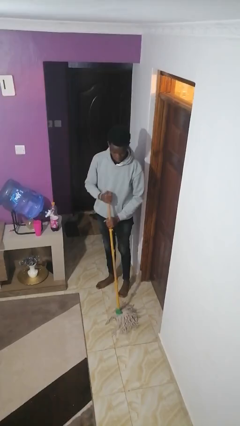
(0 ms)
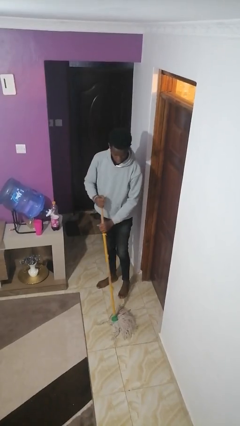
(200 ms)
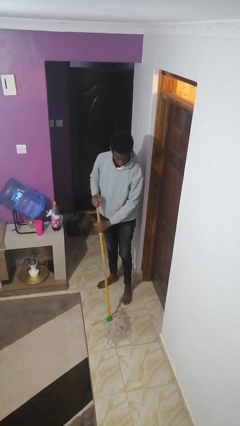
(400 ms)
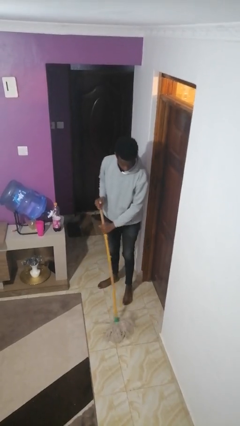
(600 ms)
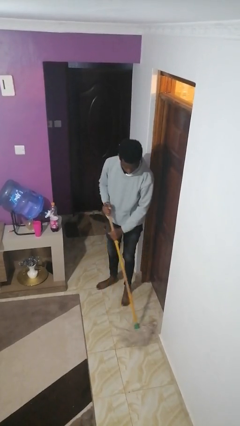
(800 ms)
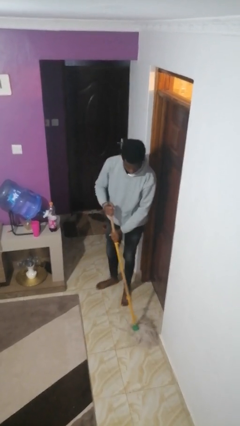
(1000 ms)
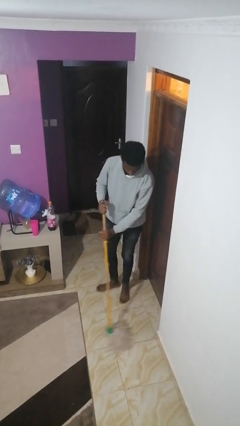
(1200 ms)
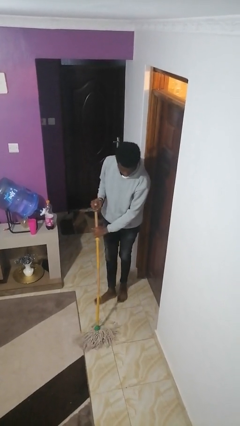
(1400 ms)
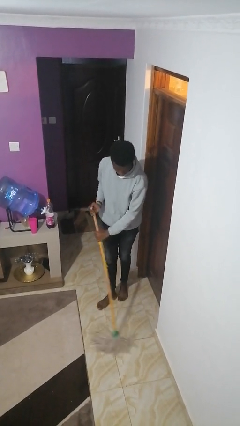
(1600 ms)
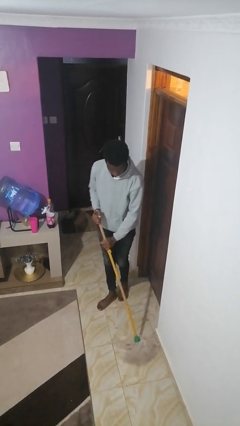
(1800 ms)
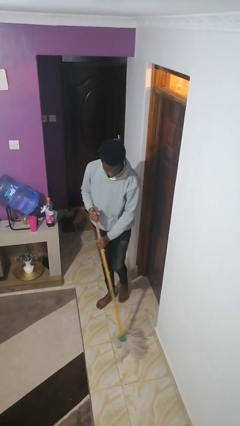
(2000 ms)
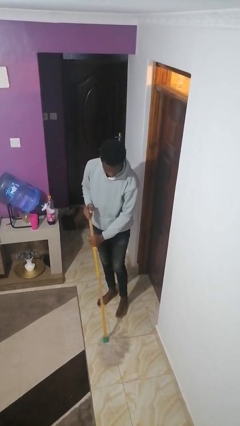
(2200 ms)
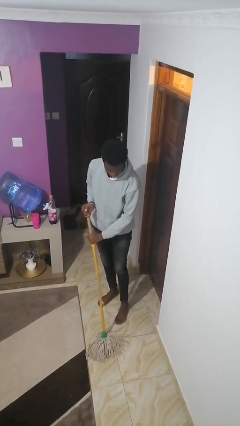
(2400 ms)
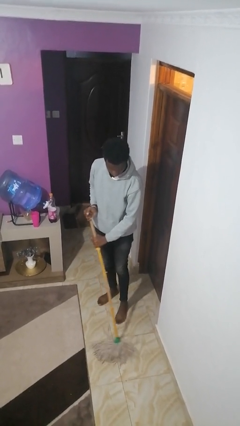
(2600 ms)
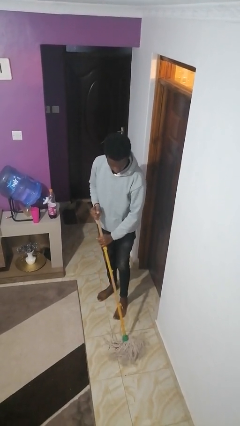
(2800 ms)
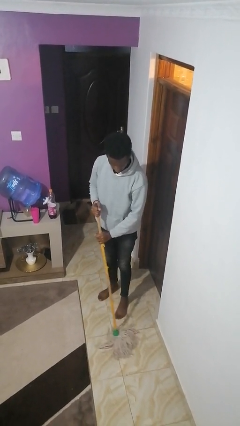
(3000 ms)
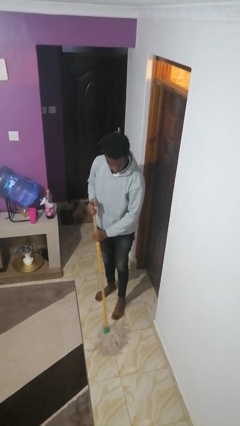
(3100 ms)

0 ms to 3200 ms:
person mops

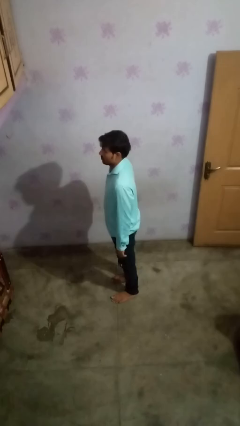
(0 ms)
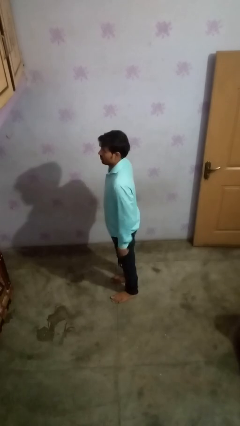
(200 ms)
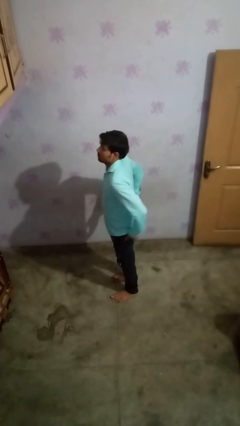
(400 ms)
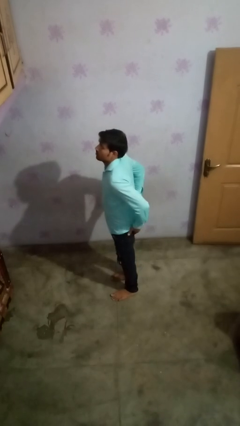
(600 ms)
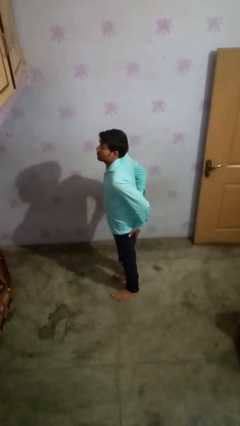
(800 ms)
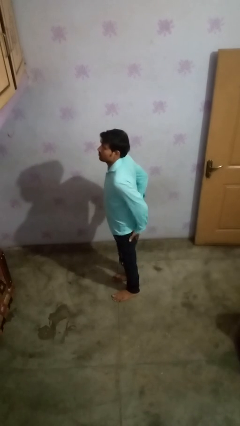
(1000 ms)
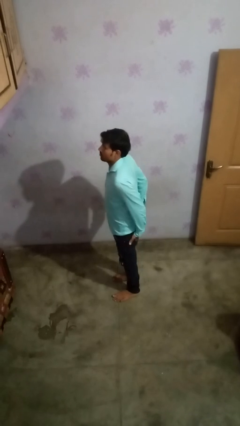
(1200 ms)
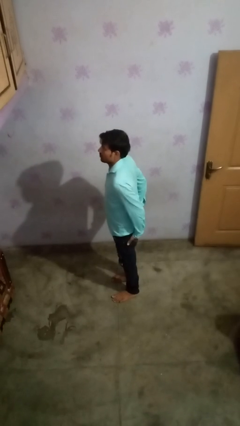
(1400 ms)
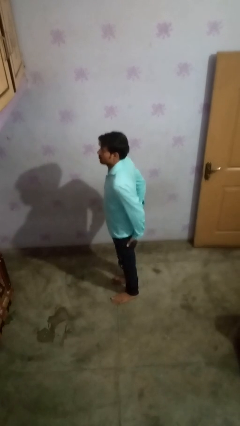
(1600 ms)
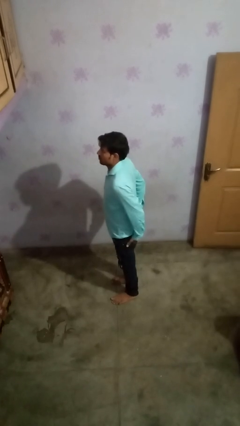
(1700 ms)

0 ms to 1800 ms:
person puts hands in back pockets

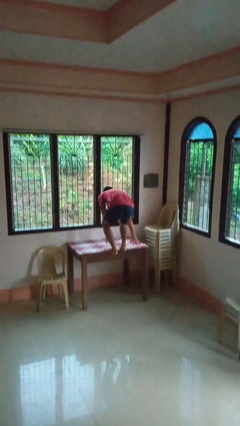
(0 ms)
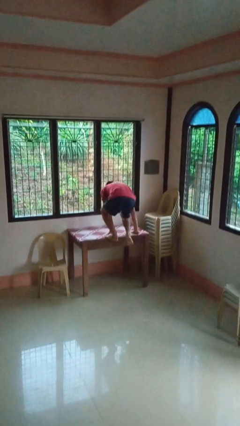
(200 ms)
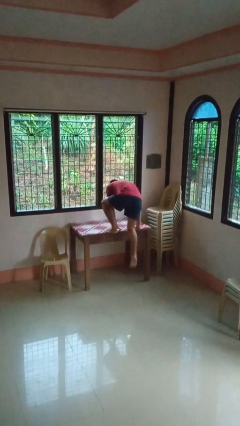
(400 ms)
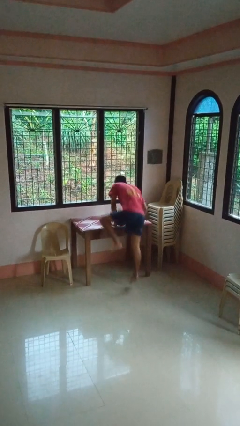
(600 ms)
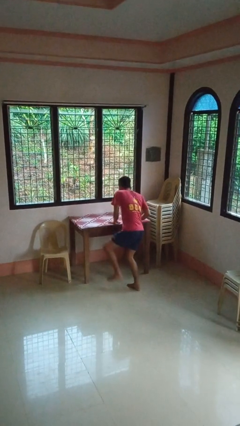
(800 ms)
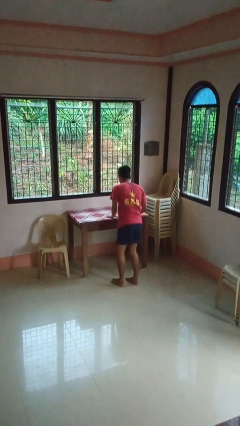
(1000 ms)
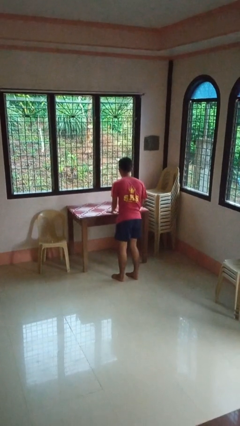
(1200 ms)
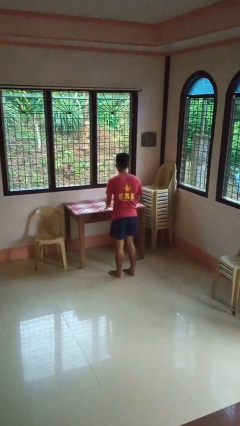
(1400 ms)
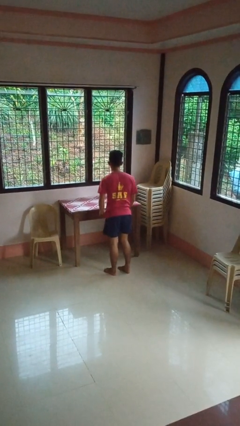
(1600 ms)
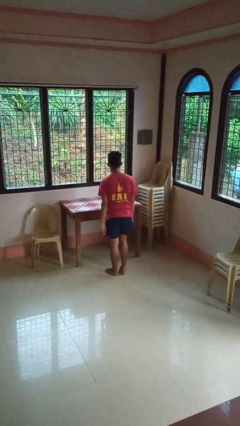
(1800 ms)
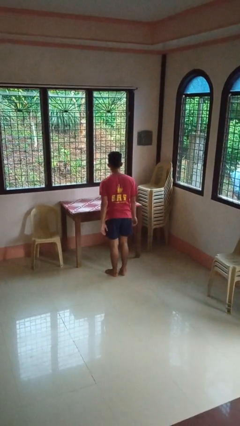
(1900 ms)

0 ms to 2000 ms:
person climbs off table

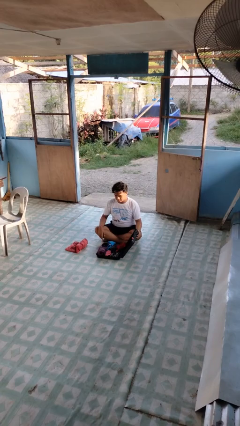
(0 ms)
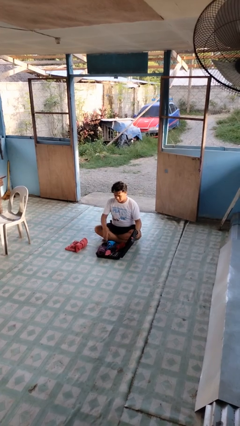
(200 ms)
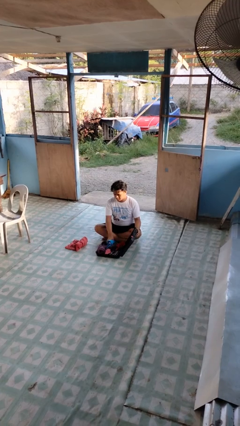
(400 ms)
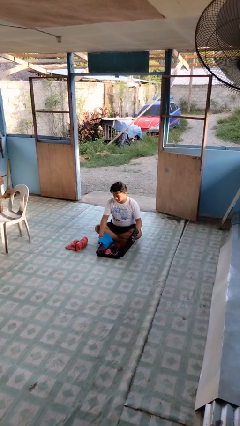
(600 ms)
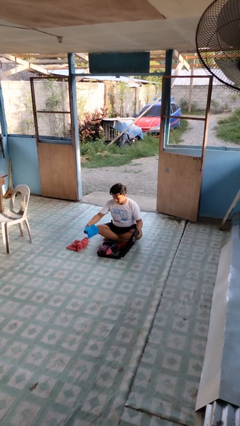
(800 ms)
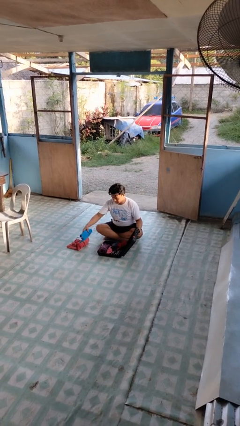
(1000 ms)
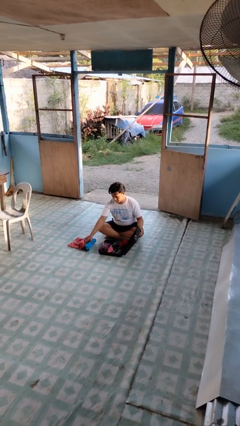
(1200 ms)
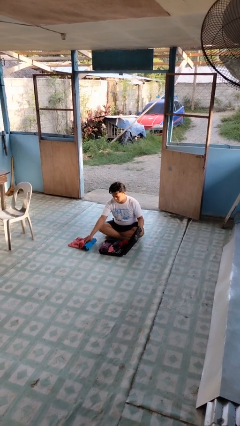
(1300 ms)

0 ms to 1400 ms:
person unloads clothes from suitcase

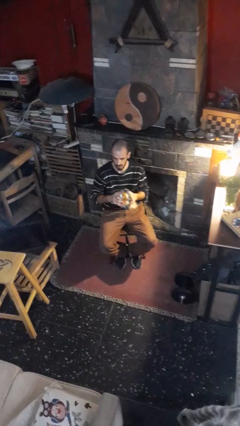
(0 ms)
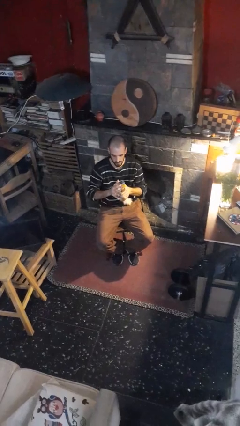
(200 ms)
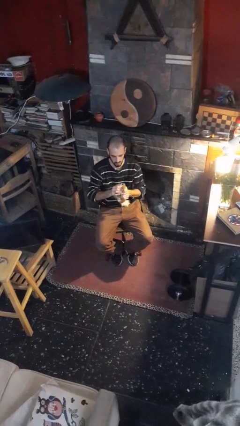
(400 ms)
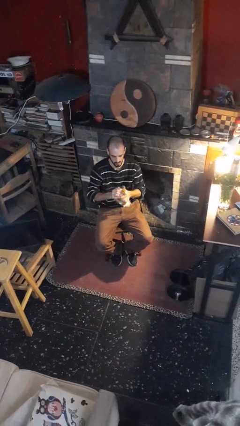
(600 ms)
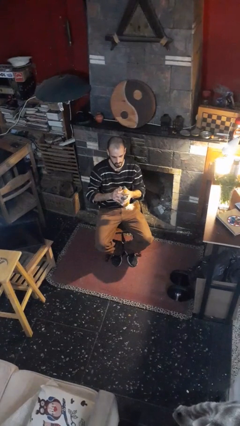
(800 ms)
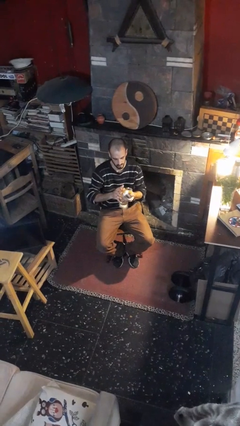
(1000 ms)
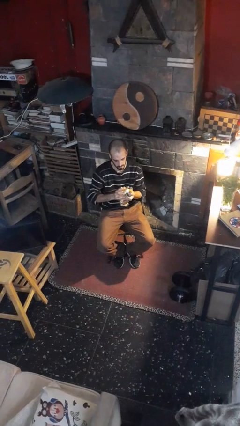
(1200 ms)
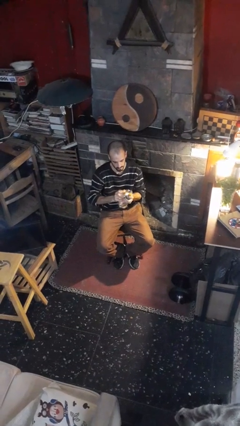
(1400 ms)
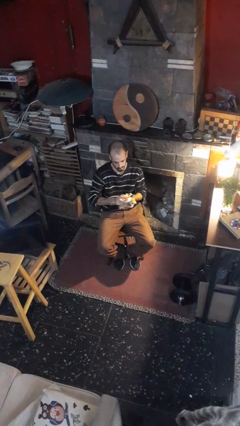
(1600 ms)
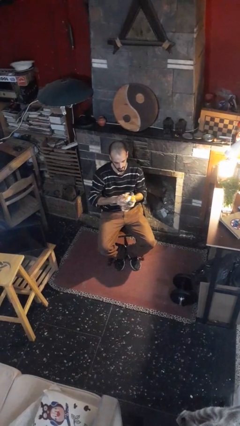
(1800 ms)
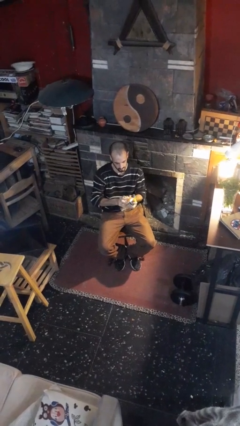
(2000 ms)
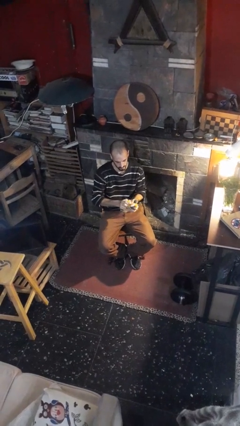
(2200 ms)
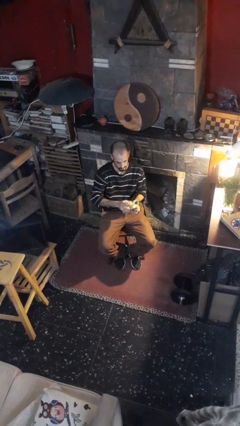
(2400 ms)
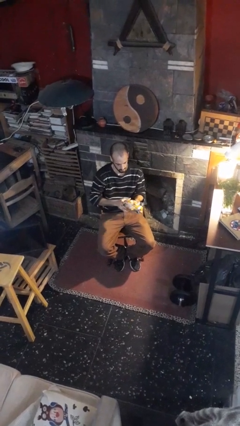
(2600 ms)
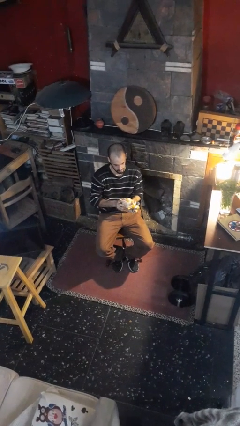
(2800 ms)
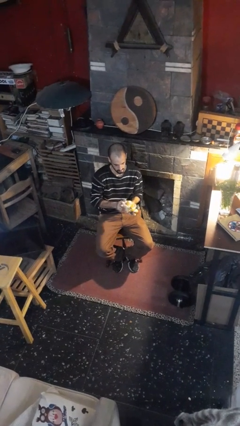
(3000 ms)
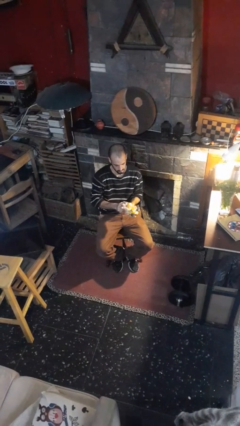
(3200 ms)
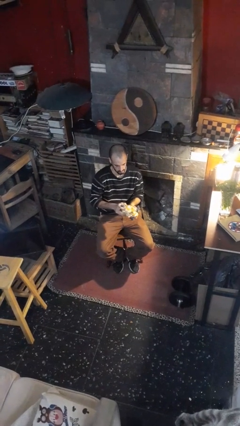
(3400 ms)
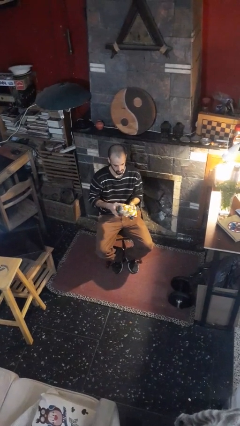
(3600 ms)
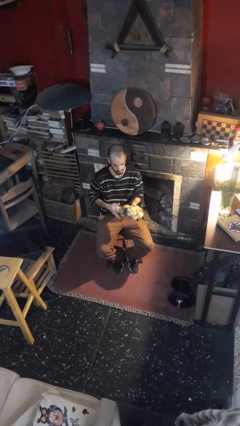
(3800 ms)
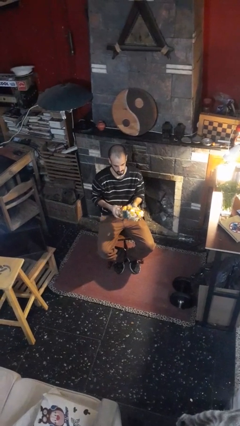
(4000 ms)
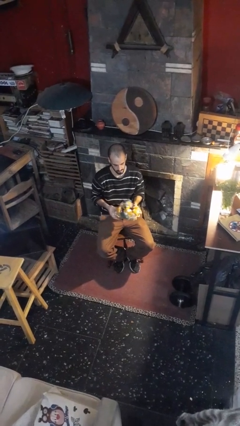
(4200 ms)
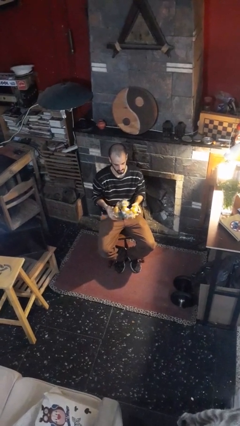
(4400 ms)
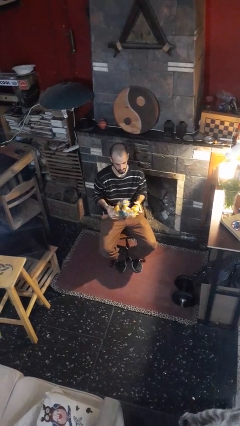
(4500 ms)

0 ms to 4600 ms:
person squeezes object

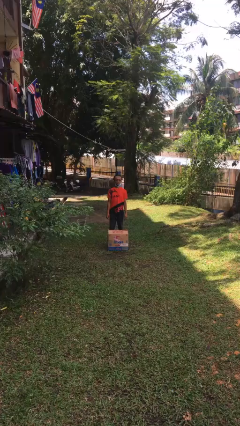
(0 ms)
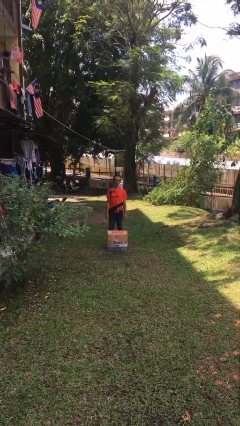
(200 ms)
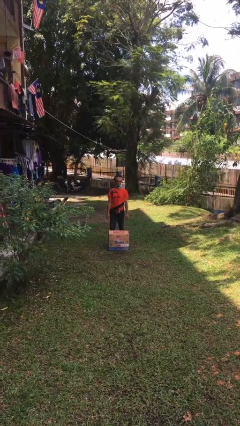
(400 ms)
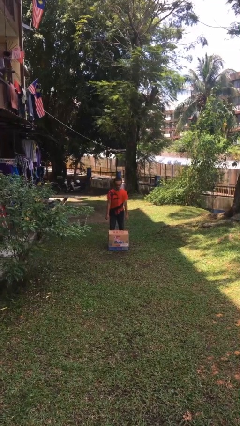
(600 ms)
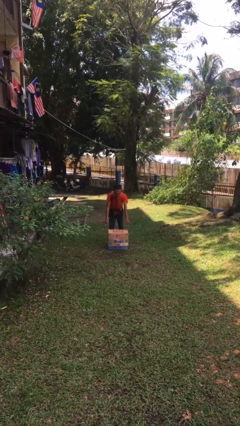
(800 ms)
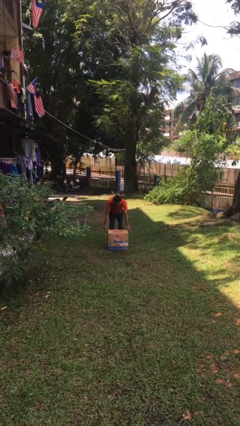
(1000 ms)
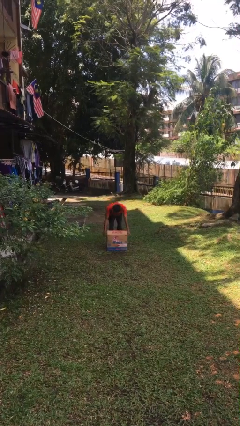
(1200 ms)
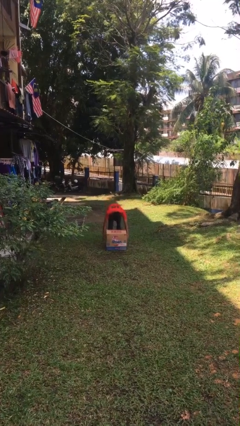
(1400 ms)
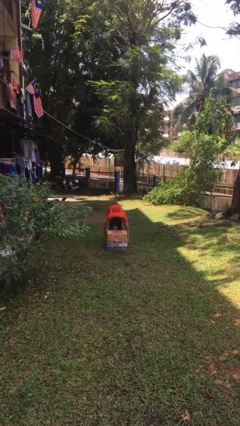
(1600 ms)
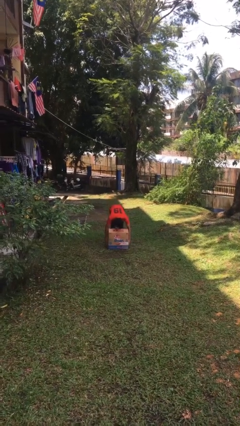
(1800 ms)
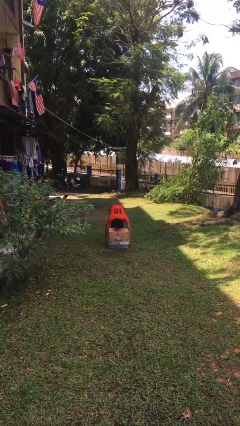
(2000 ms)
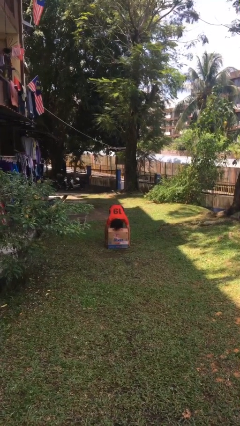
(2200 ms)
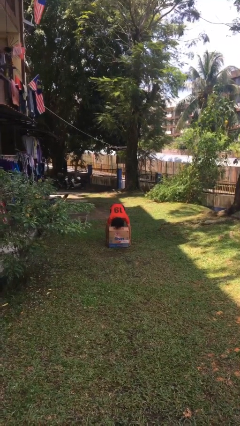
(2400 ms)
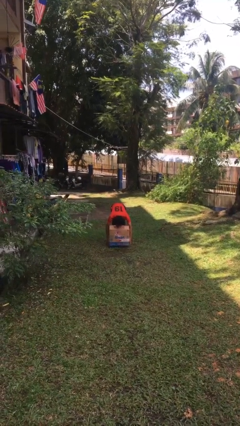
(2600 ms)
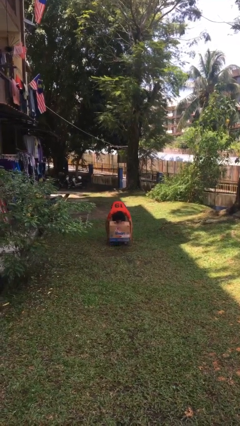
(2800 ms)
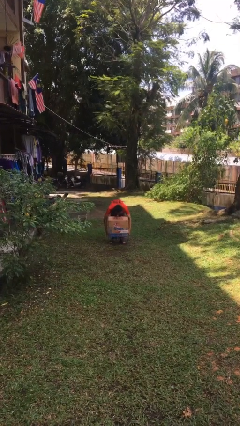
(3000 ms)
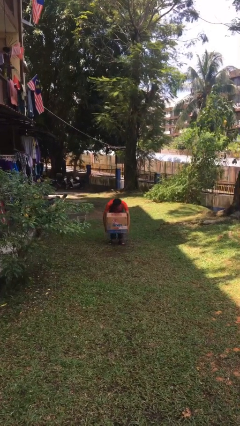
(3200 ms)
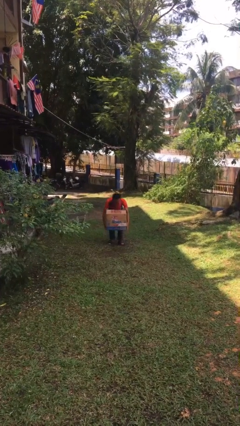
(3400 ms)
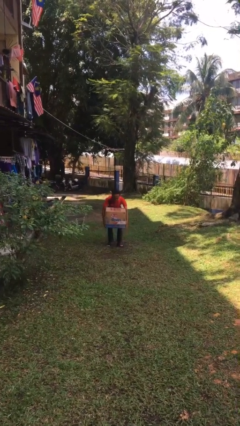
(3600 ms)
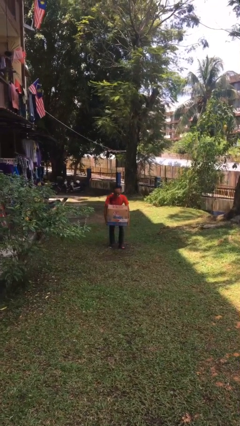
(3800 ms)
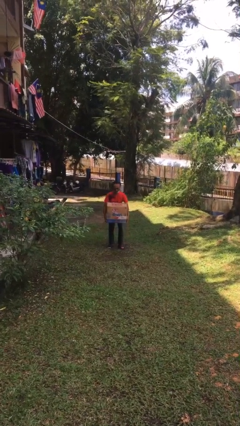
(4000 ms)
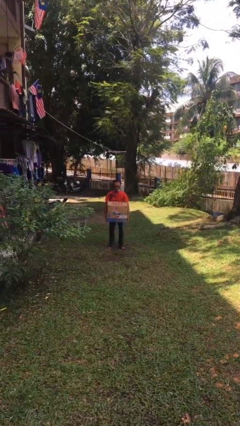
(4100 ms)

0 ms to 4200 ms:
person picks up object from floor

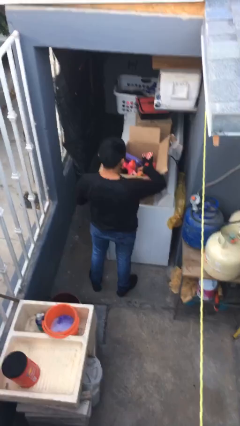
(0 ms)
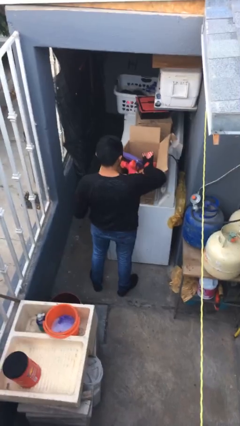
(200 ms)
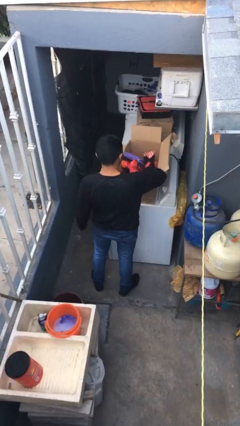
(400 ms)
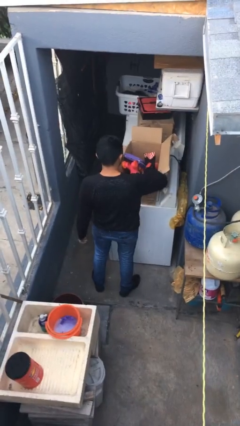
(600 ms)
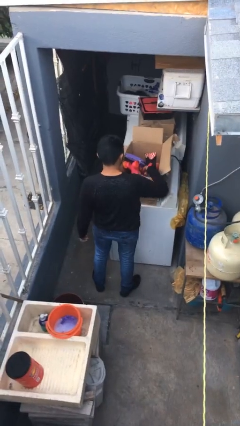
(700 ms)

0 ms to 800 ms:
person puts object into box
